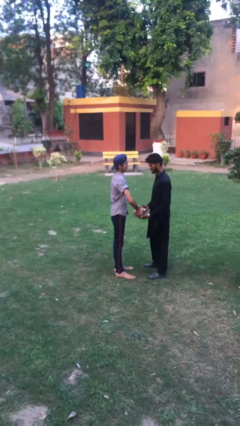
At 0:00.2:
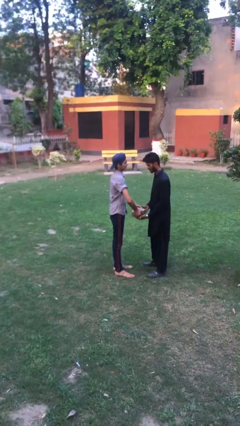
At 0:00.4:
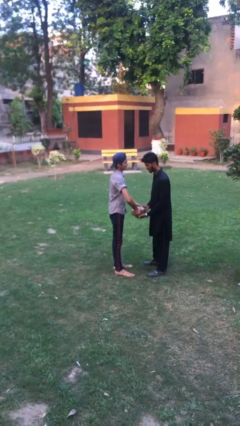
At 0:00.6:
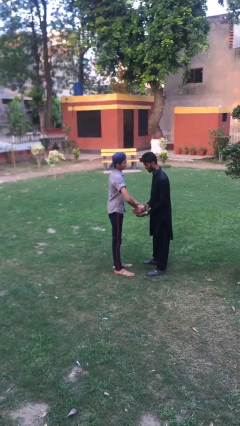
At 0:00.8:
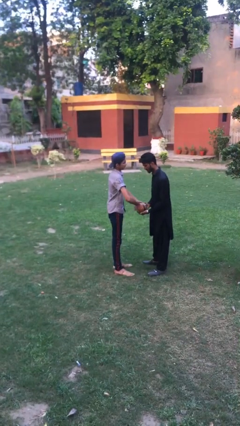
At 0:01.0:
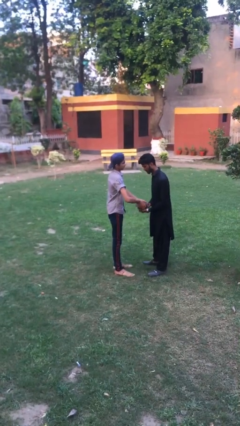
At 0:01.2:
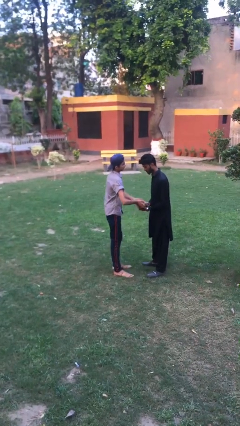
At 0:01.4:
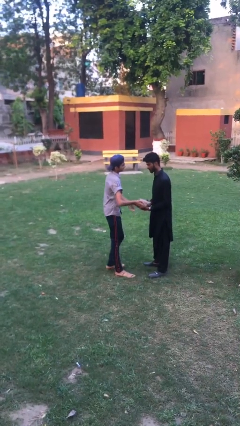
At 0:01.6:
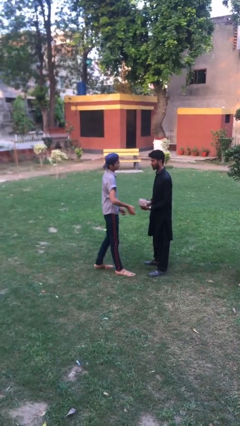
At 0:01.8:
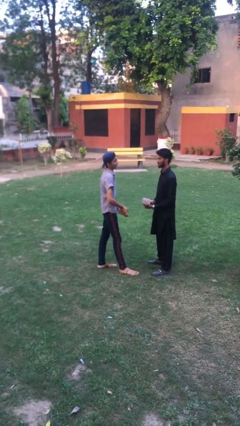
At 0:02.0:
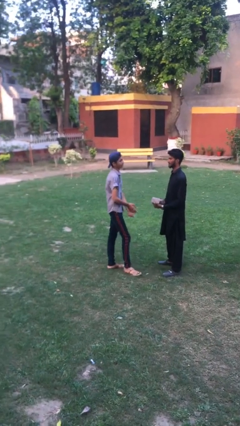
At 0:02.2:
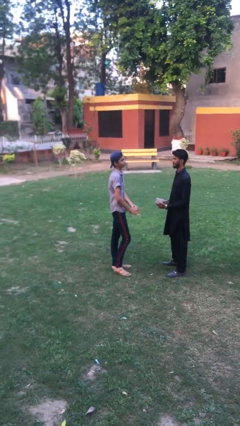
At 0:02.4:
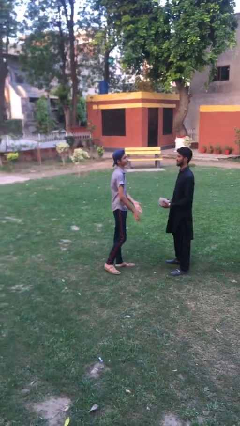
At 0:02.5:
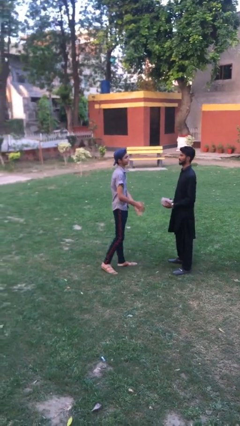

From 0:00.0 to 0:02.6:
person transfers object to person

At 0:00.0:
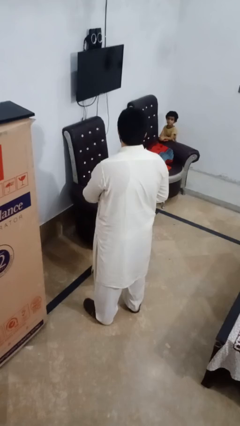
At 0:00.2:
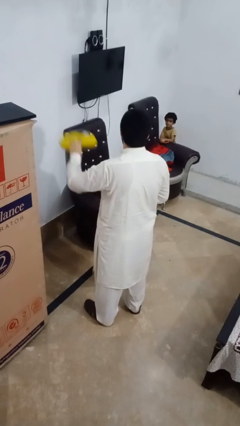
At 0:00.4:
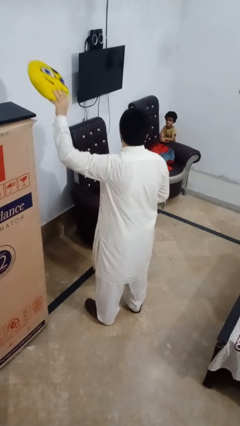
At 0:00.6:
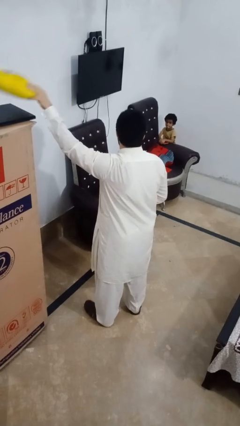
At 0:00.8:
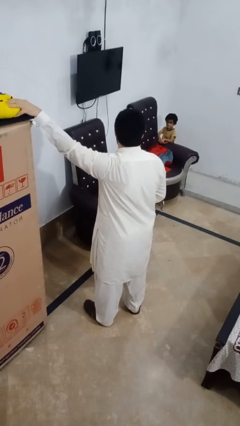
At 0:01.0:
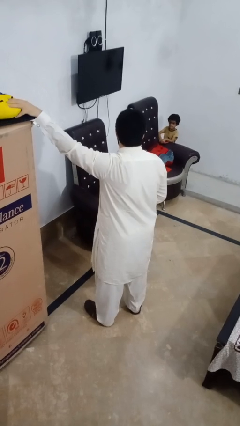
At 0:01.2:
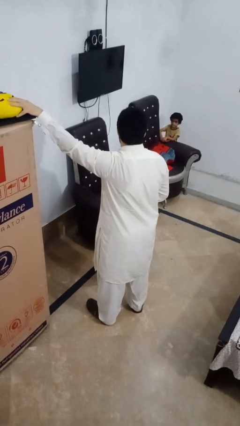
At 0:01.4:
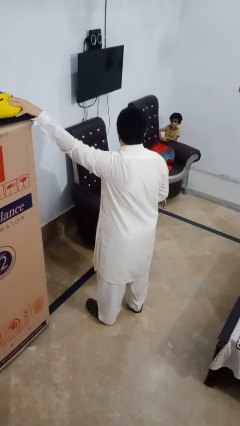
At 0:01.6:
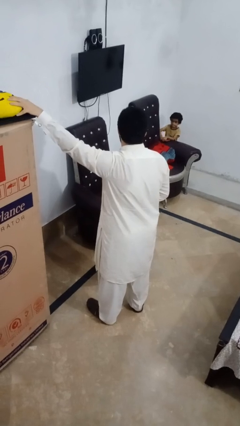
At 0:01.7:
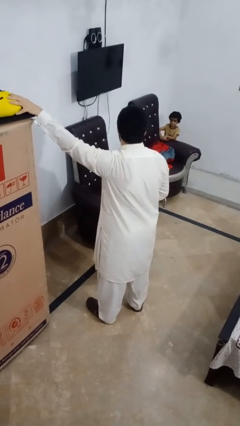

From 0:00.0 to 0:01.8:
person puts down object on shelf

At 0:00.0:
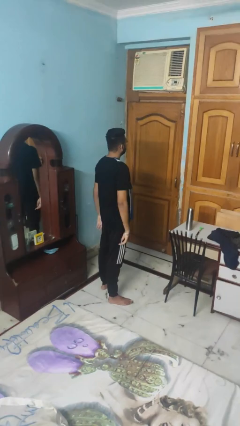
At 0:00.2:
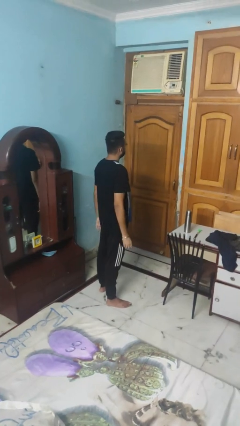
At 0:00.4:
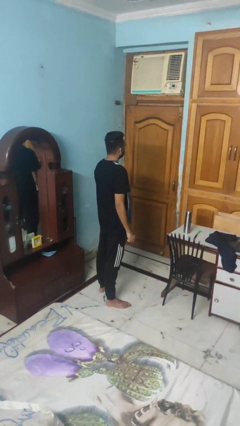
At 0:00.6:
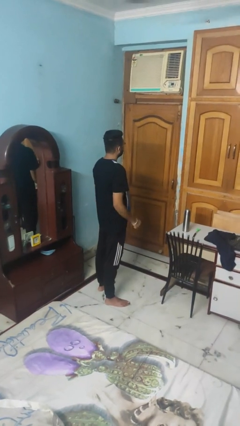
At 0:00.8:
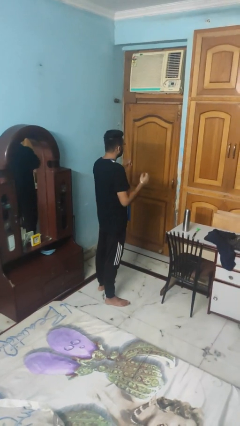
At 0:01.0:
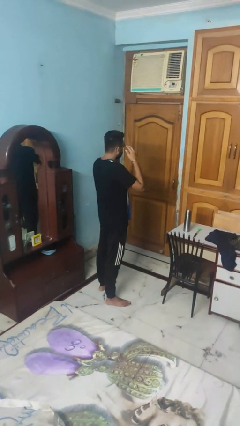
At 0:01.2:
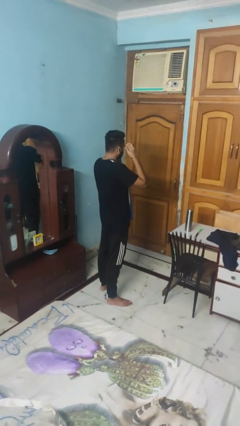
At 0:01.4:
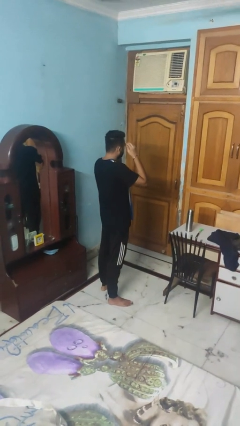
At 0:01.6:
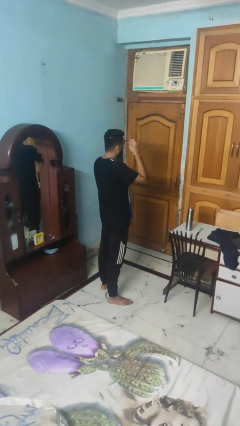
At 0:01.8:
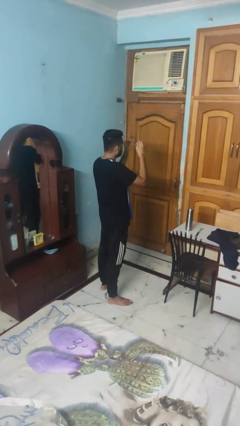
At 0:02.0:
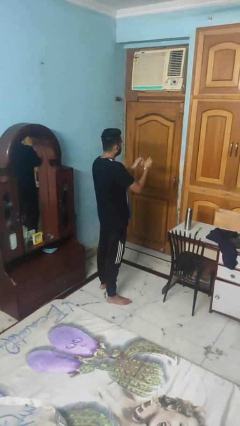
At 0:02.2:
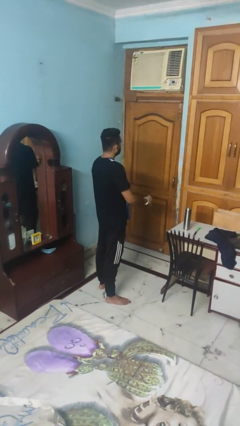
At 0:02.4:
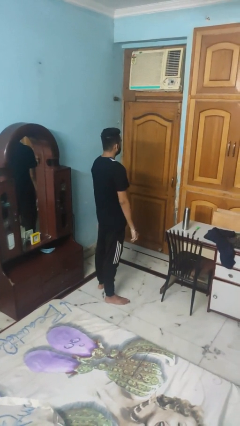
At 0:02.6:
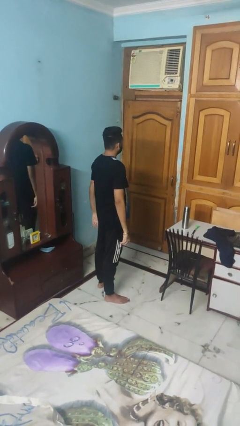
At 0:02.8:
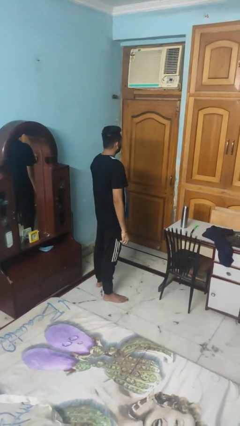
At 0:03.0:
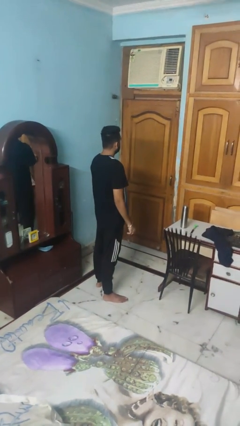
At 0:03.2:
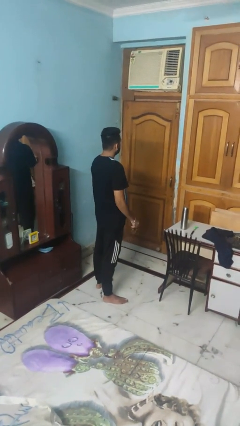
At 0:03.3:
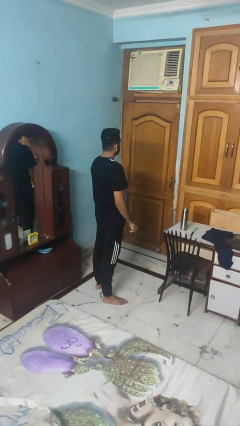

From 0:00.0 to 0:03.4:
person takes off glasses

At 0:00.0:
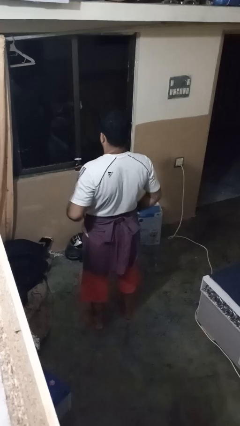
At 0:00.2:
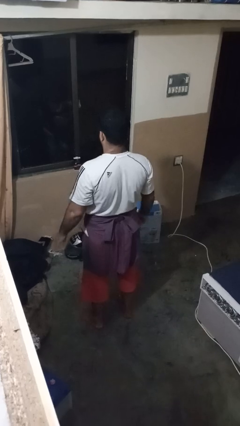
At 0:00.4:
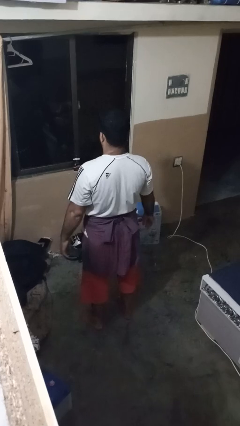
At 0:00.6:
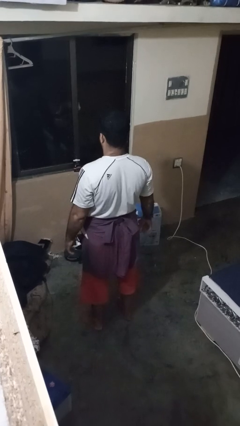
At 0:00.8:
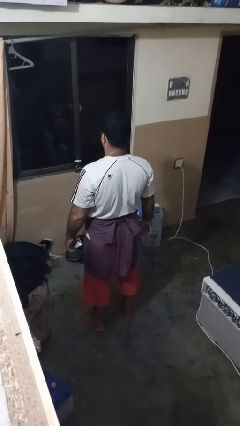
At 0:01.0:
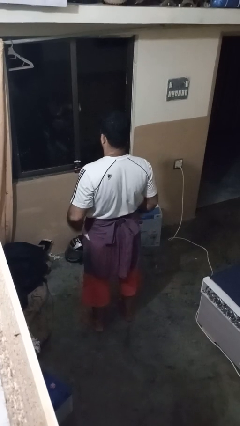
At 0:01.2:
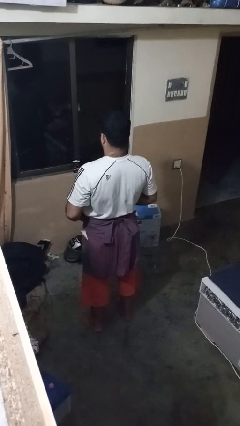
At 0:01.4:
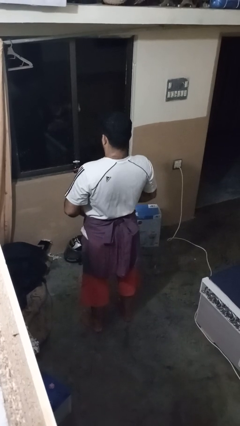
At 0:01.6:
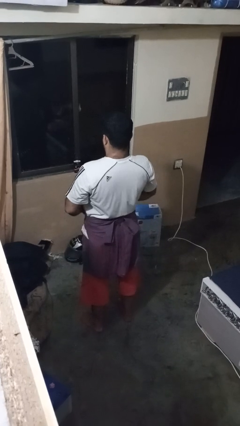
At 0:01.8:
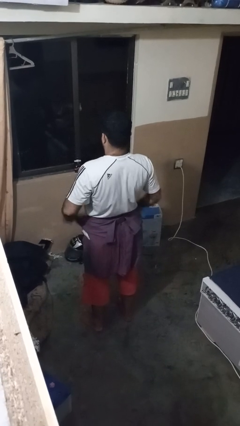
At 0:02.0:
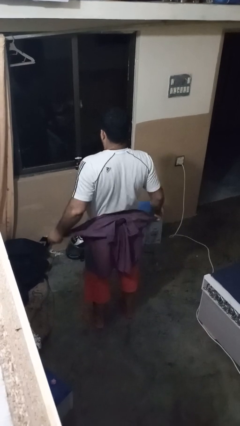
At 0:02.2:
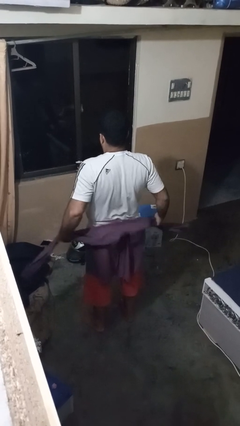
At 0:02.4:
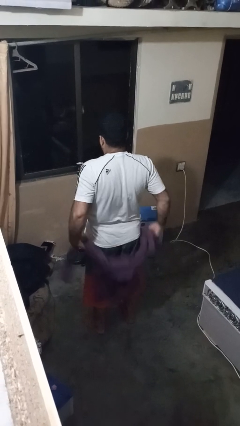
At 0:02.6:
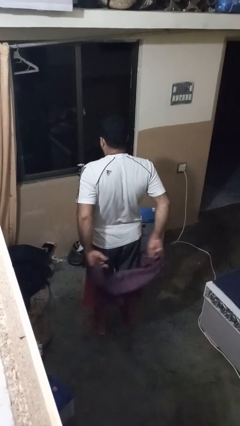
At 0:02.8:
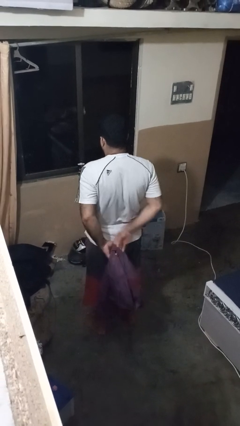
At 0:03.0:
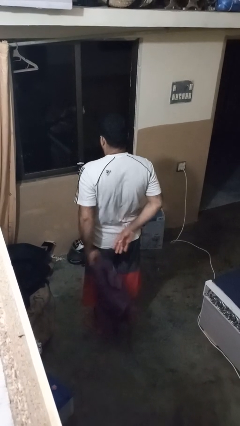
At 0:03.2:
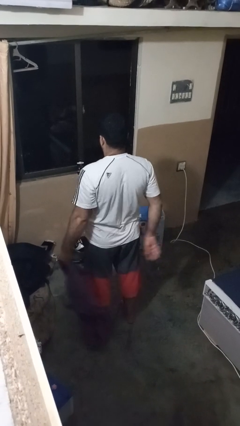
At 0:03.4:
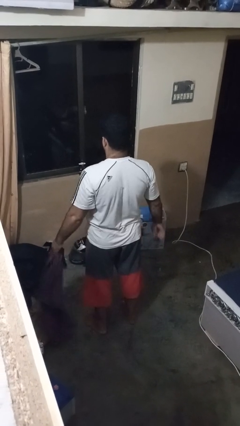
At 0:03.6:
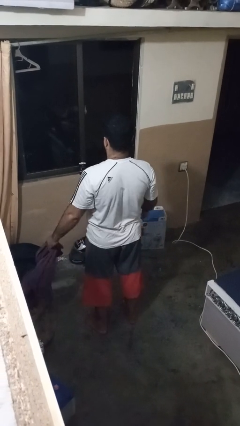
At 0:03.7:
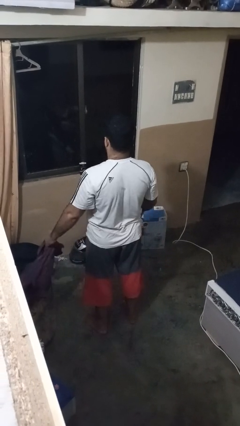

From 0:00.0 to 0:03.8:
person unties jacket around waist

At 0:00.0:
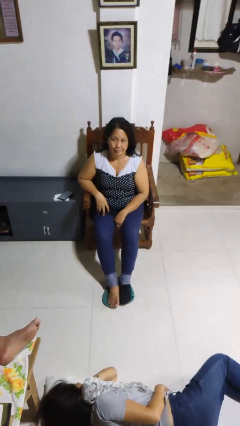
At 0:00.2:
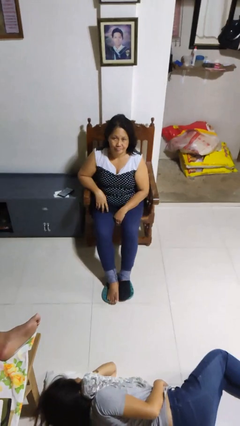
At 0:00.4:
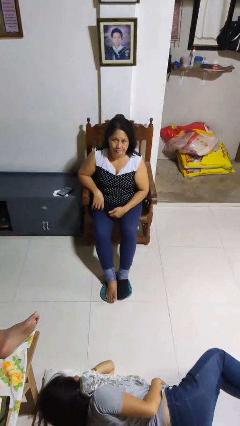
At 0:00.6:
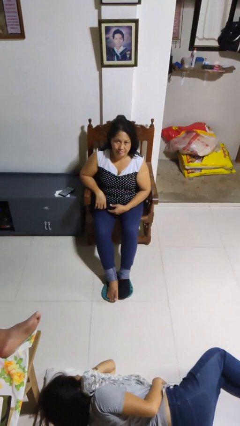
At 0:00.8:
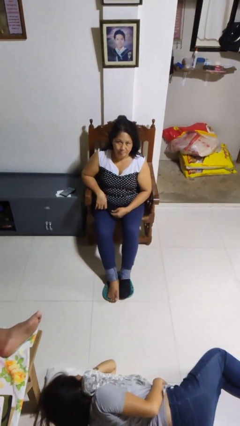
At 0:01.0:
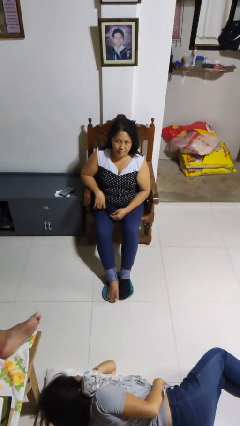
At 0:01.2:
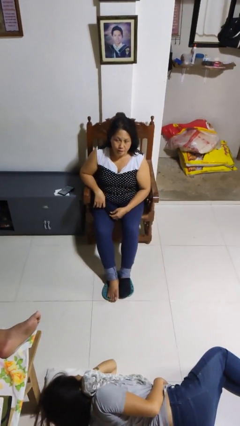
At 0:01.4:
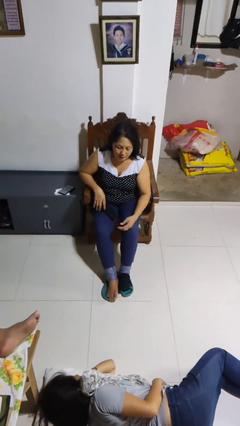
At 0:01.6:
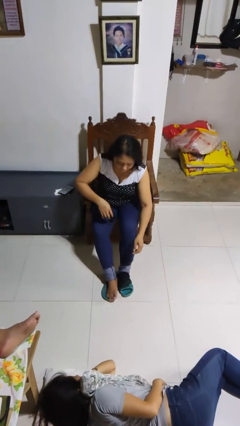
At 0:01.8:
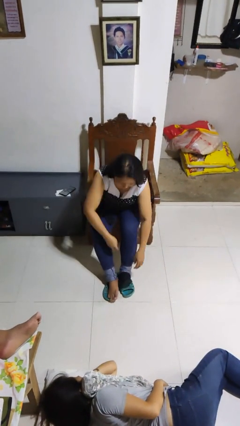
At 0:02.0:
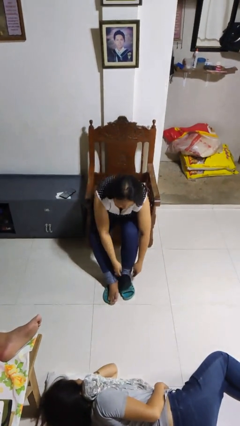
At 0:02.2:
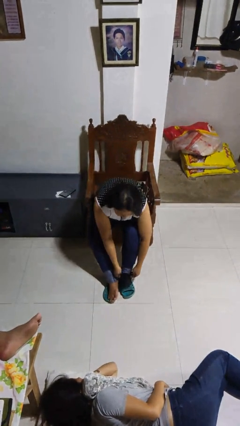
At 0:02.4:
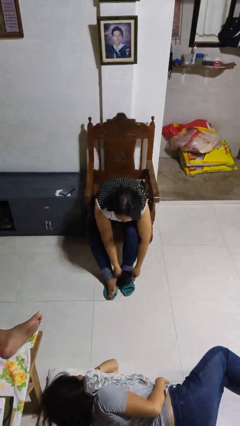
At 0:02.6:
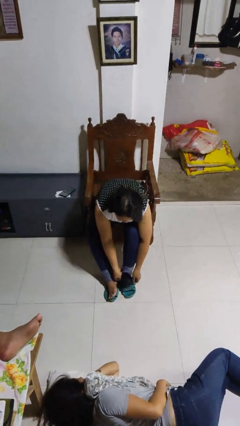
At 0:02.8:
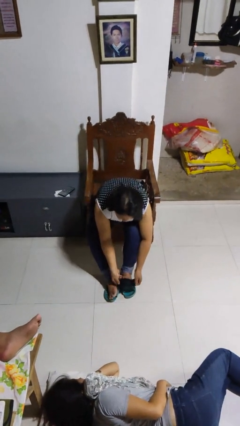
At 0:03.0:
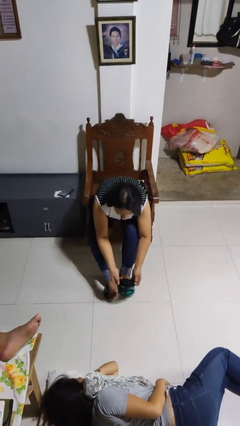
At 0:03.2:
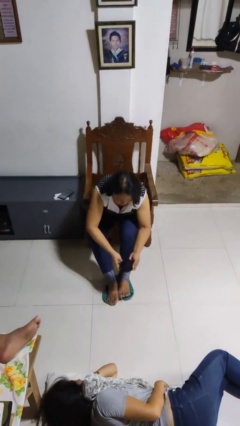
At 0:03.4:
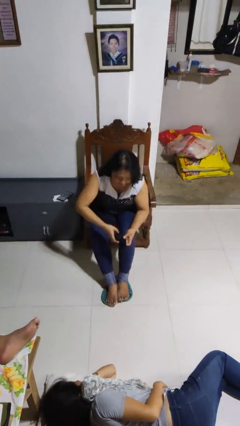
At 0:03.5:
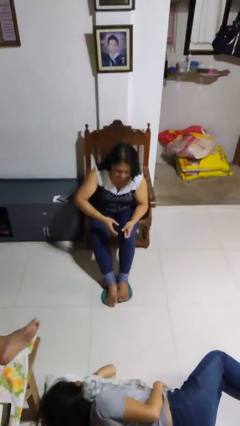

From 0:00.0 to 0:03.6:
person takes off socks

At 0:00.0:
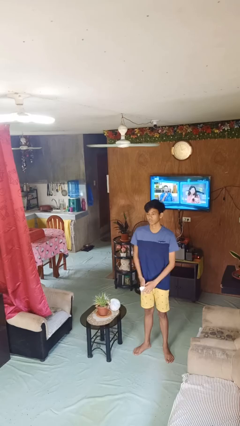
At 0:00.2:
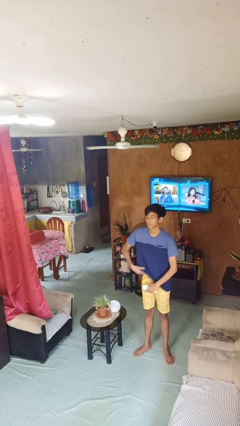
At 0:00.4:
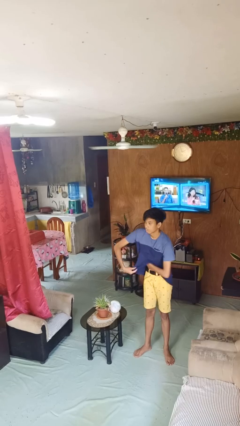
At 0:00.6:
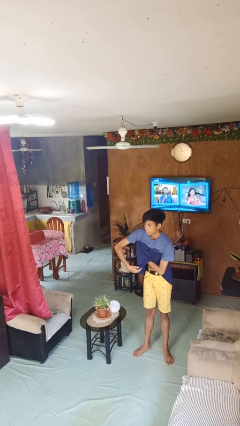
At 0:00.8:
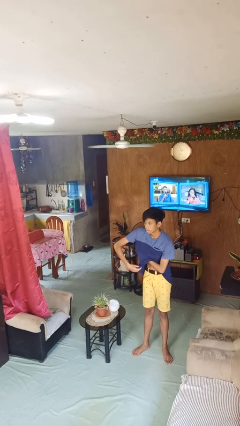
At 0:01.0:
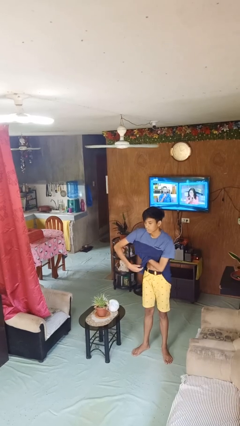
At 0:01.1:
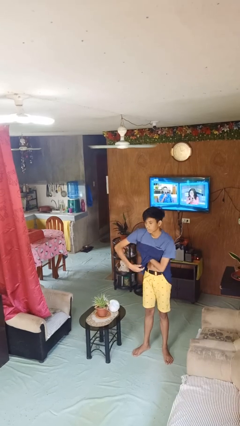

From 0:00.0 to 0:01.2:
person applies deodorant

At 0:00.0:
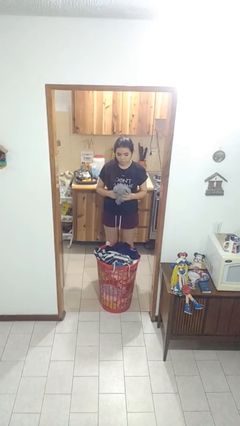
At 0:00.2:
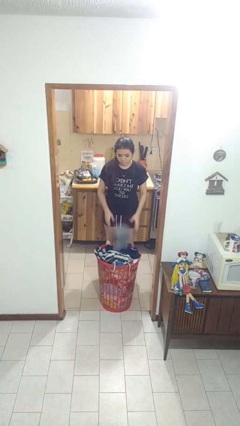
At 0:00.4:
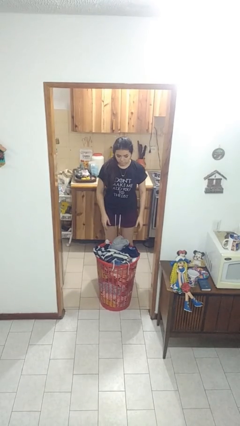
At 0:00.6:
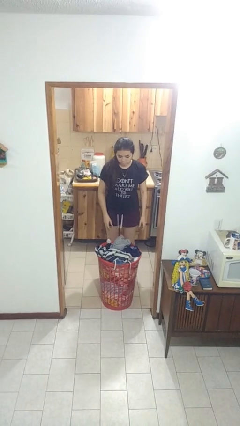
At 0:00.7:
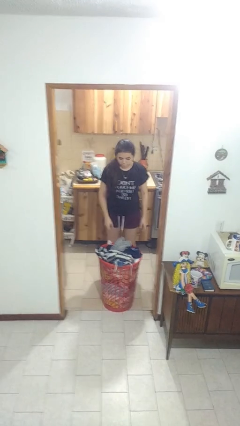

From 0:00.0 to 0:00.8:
person puts object into basket
